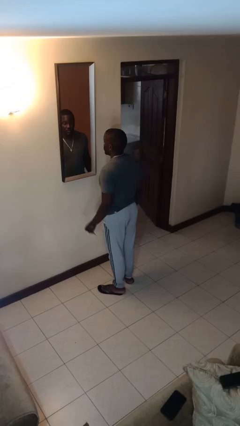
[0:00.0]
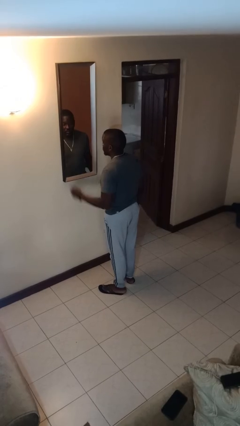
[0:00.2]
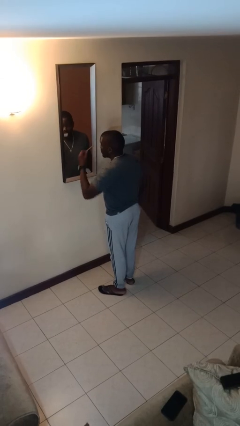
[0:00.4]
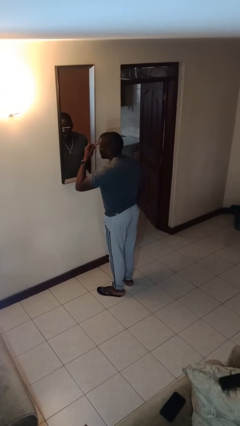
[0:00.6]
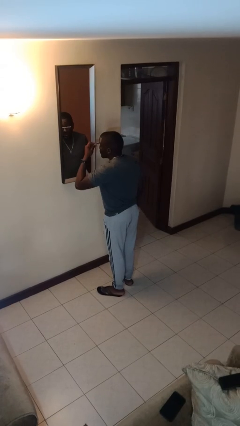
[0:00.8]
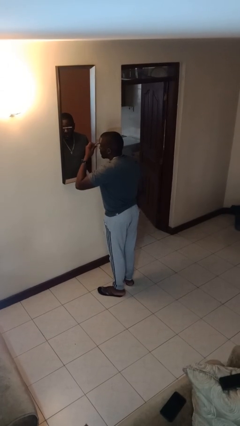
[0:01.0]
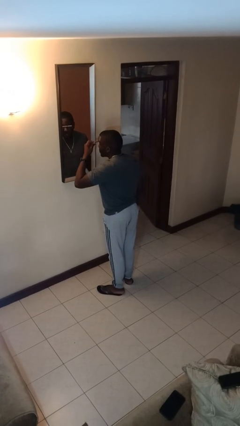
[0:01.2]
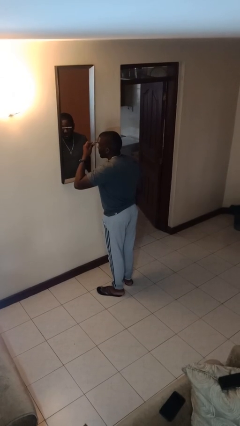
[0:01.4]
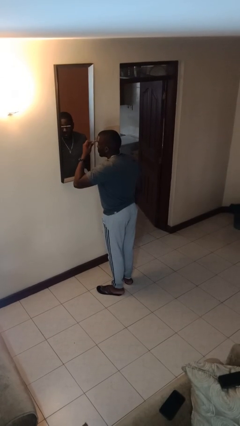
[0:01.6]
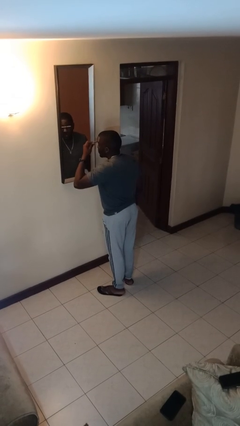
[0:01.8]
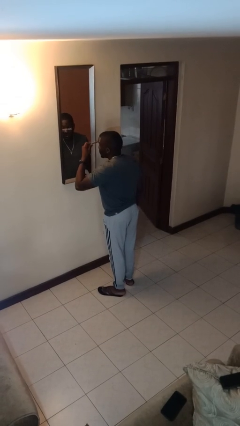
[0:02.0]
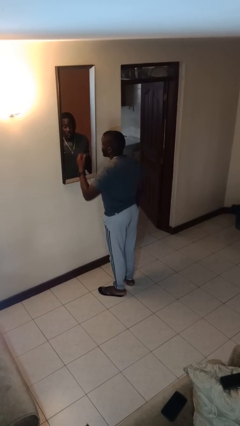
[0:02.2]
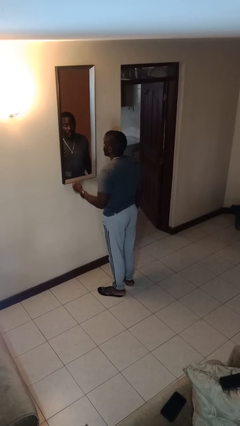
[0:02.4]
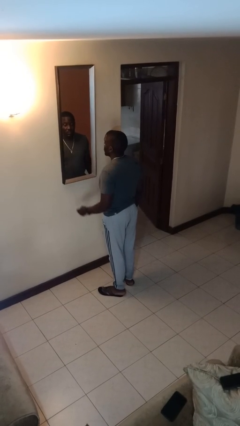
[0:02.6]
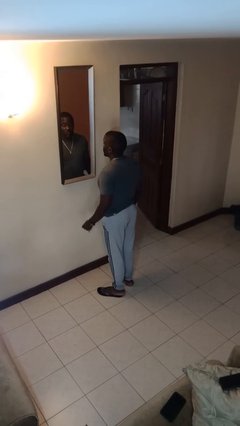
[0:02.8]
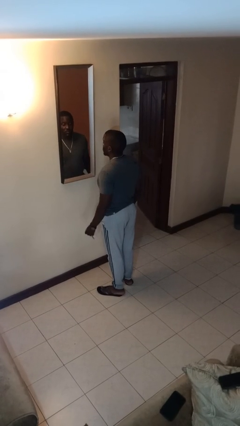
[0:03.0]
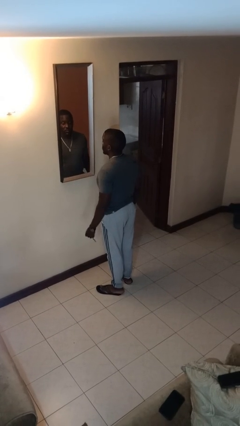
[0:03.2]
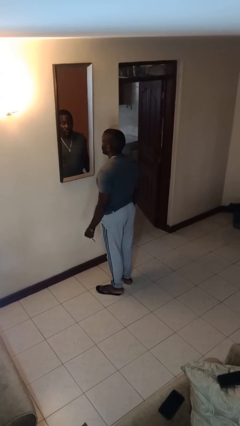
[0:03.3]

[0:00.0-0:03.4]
person applies eye makeup

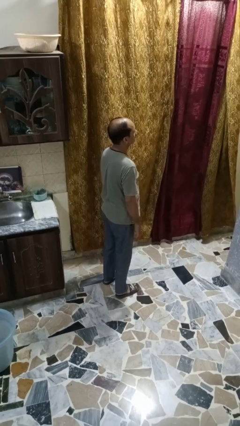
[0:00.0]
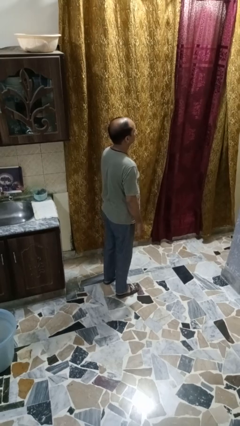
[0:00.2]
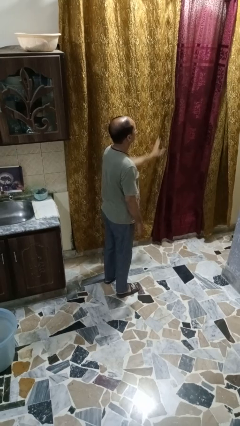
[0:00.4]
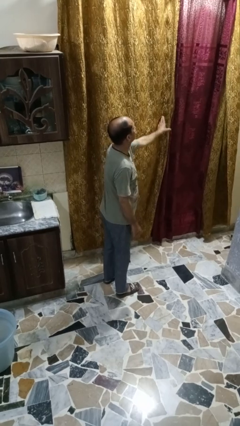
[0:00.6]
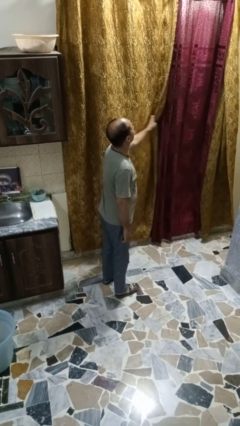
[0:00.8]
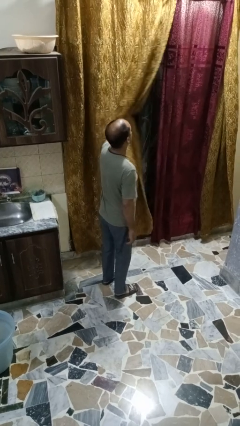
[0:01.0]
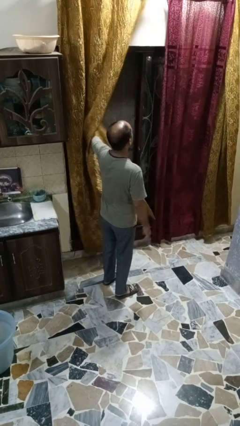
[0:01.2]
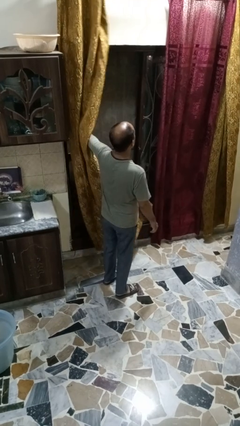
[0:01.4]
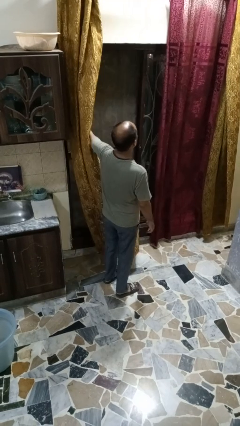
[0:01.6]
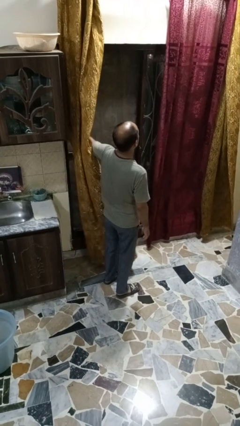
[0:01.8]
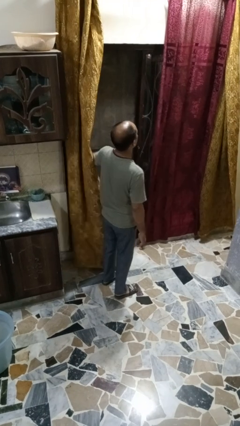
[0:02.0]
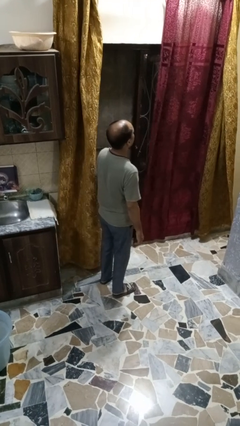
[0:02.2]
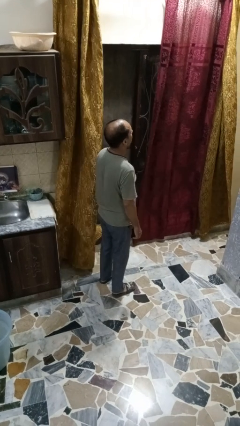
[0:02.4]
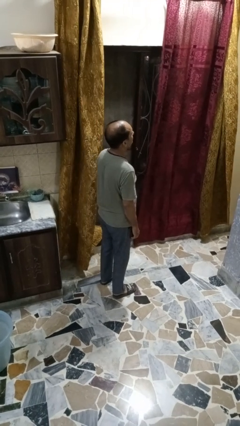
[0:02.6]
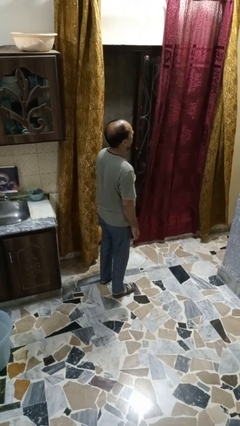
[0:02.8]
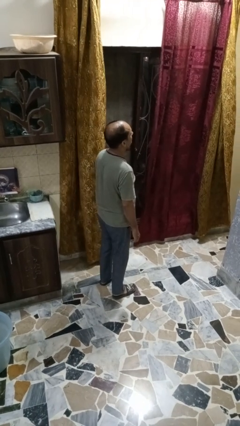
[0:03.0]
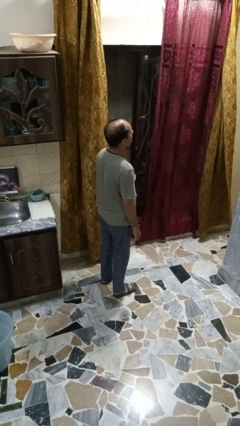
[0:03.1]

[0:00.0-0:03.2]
person opens curtains

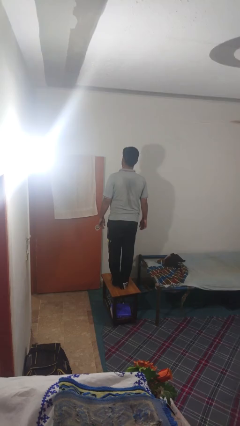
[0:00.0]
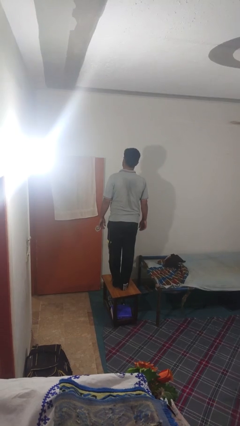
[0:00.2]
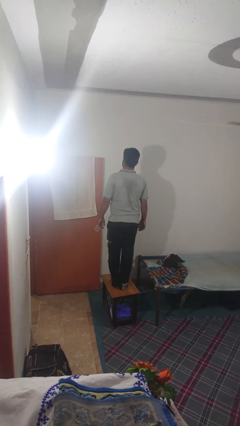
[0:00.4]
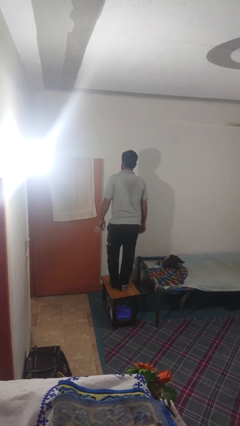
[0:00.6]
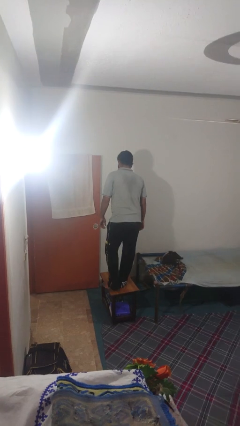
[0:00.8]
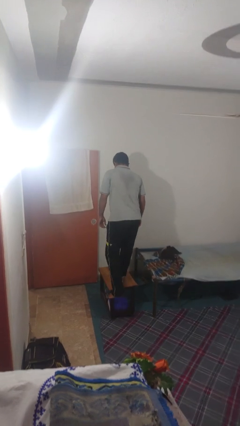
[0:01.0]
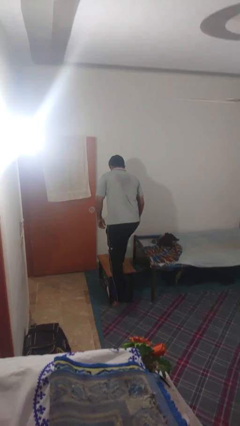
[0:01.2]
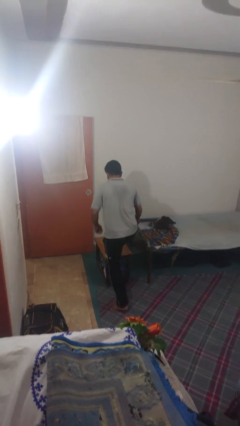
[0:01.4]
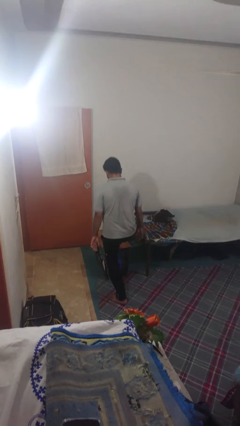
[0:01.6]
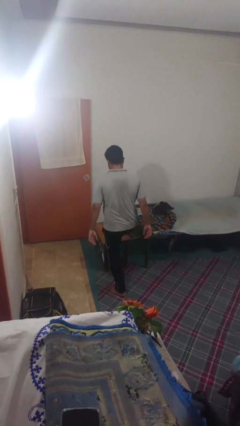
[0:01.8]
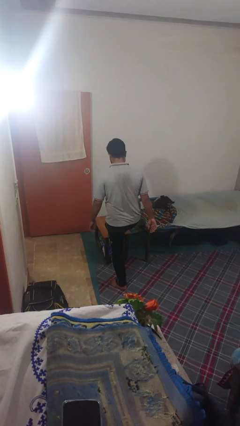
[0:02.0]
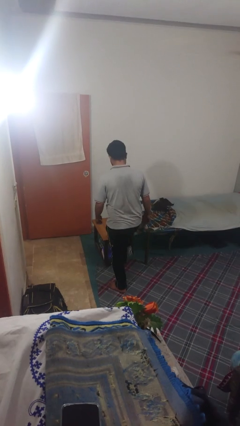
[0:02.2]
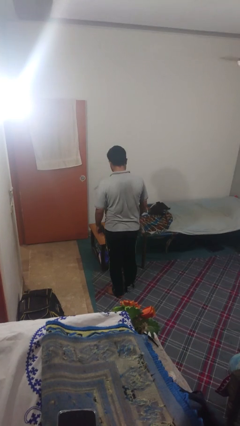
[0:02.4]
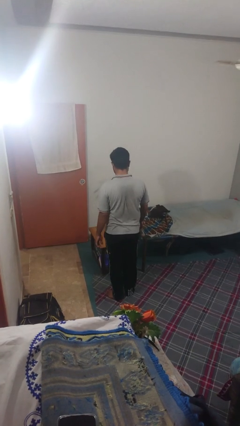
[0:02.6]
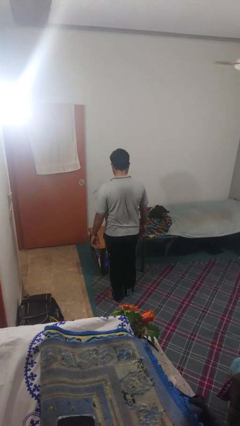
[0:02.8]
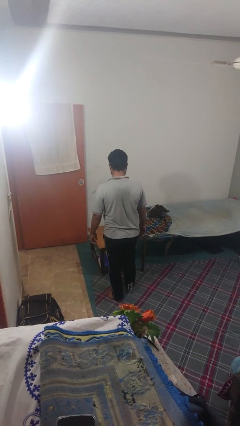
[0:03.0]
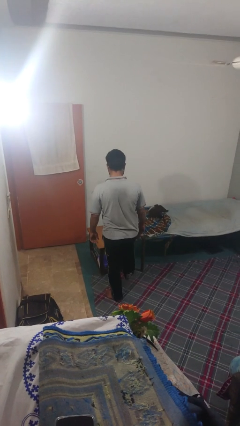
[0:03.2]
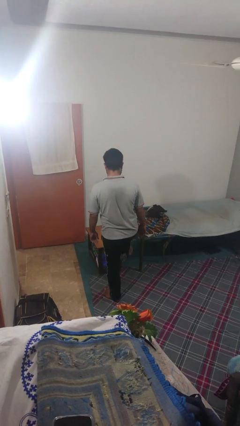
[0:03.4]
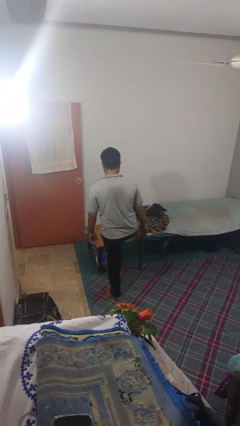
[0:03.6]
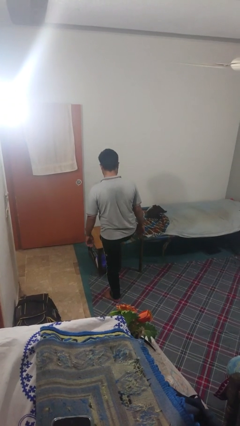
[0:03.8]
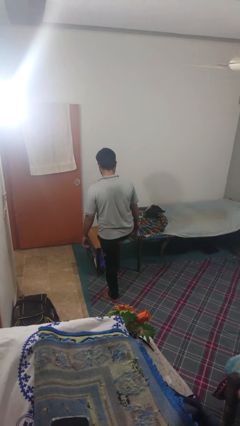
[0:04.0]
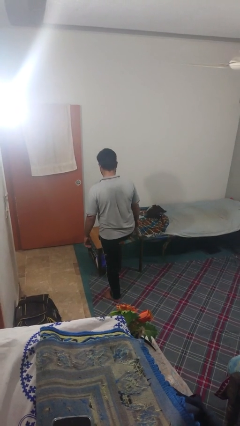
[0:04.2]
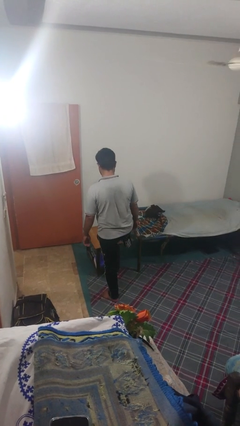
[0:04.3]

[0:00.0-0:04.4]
person climbs off table

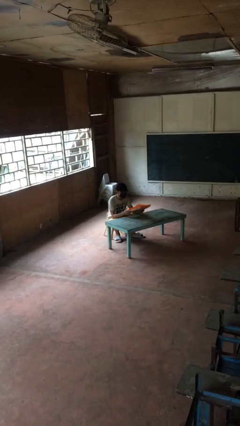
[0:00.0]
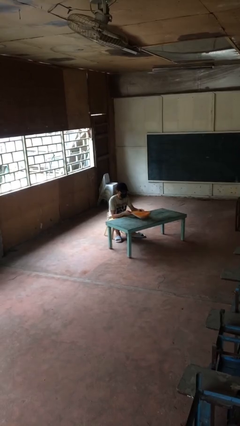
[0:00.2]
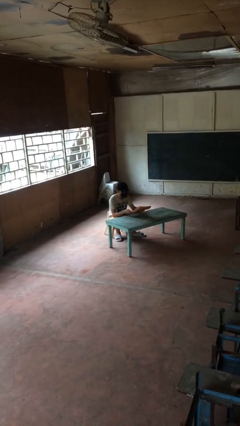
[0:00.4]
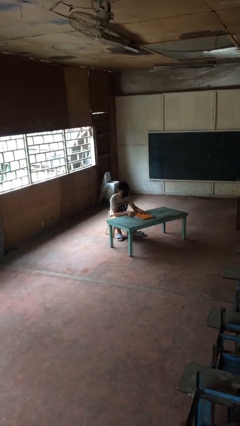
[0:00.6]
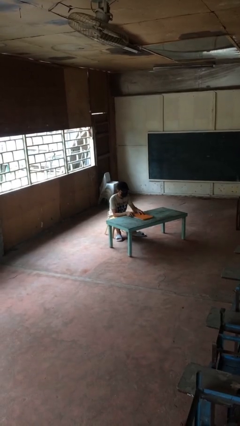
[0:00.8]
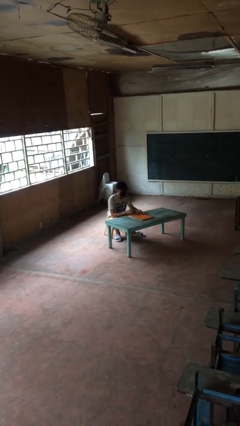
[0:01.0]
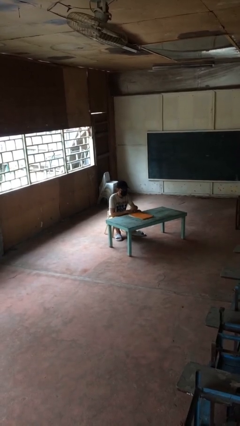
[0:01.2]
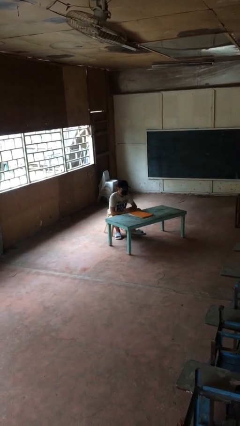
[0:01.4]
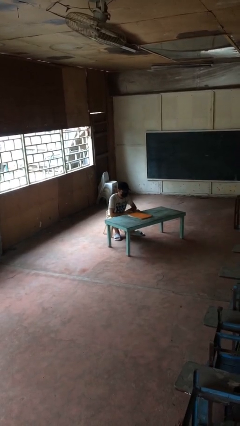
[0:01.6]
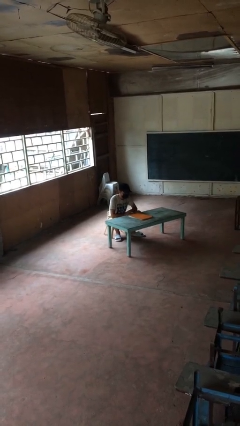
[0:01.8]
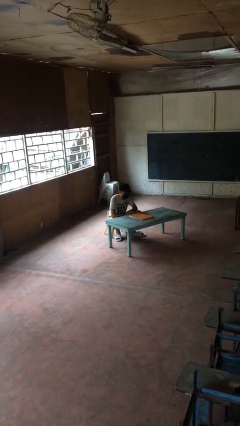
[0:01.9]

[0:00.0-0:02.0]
person puts down object on table

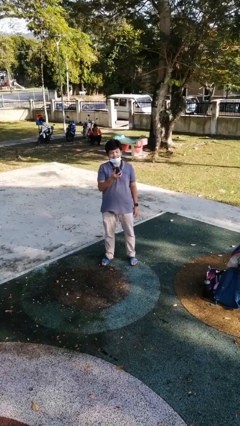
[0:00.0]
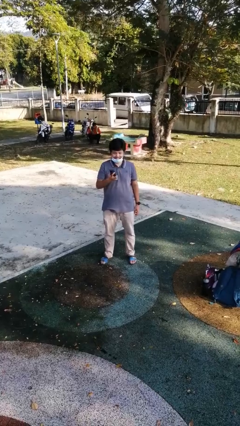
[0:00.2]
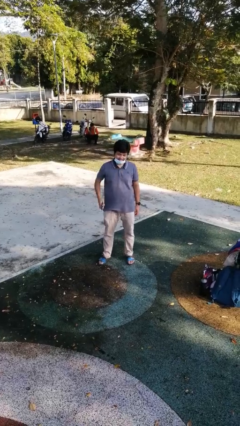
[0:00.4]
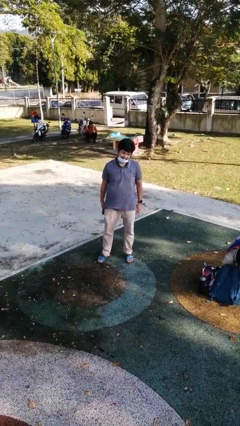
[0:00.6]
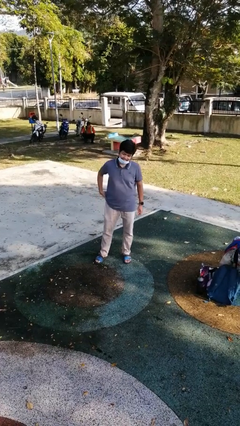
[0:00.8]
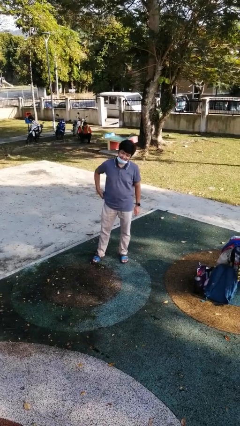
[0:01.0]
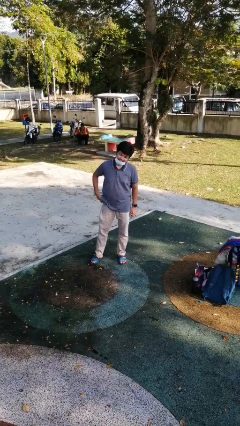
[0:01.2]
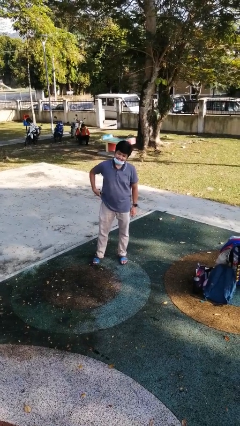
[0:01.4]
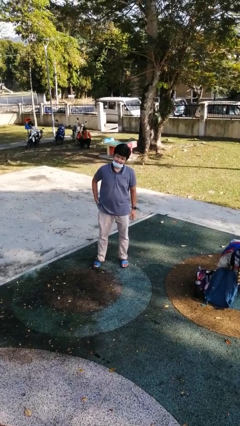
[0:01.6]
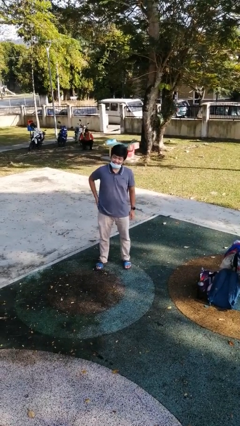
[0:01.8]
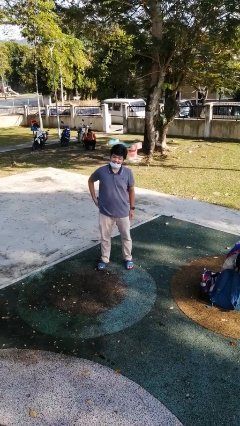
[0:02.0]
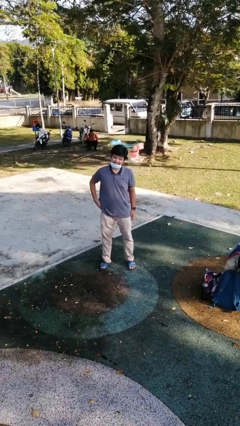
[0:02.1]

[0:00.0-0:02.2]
person puts phone into pocket

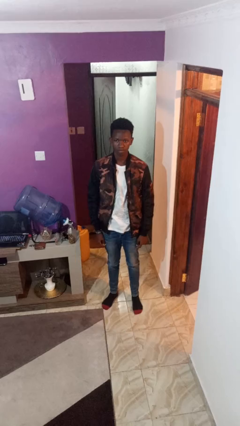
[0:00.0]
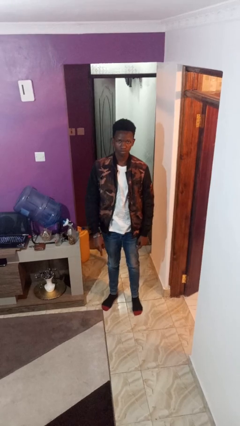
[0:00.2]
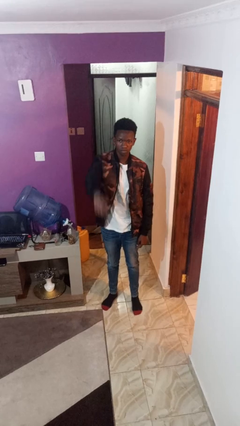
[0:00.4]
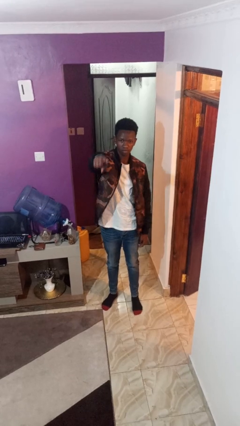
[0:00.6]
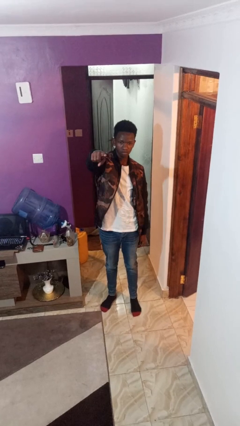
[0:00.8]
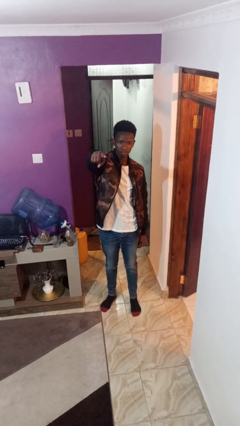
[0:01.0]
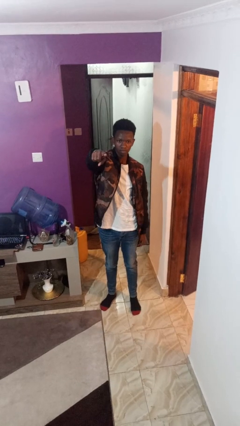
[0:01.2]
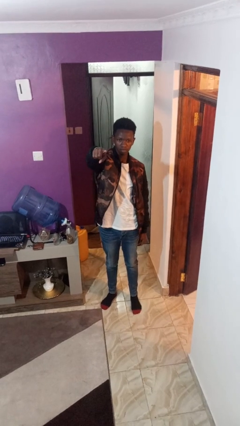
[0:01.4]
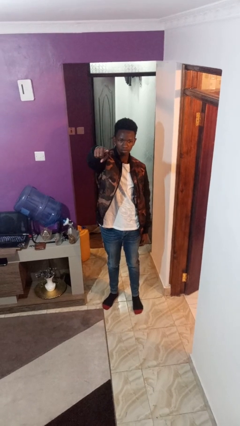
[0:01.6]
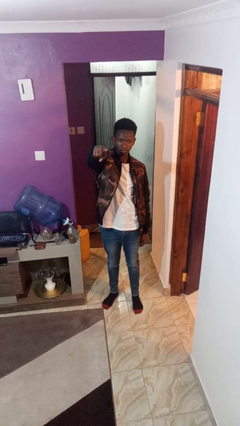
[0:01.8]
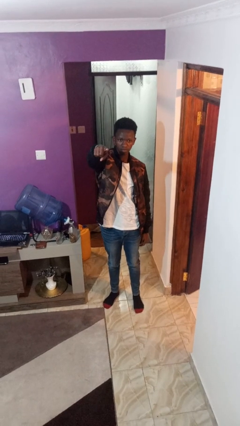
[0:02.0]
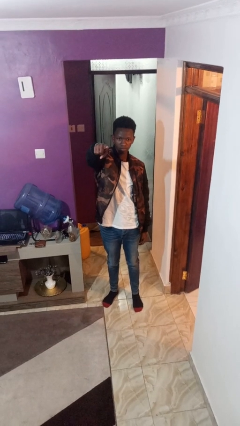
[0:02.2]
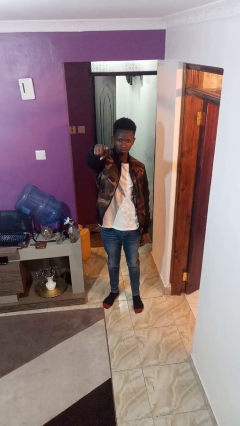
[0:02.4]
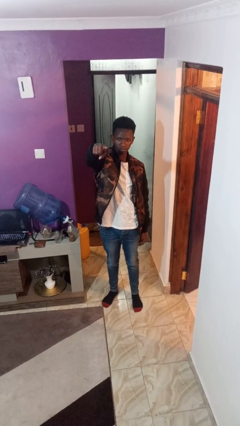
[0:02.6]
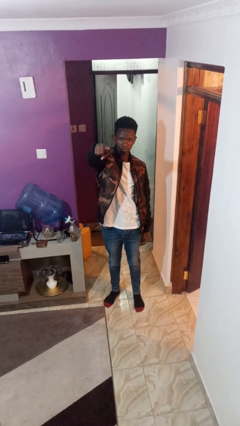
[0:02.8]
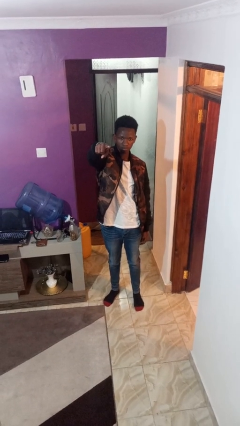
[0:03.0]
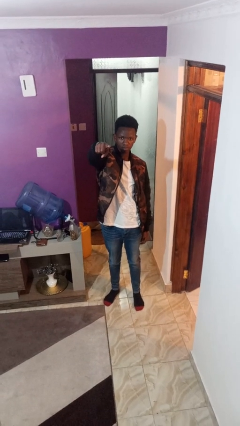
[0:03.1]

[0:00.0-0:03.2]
person points at person
